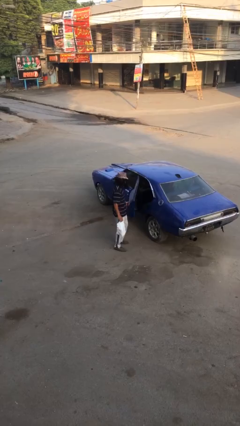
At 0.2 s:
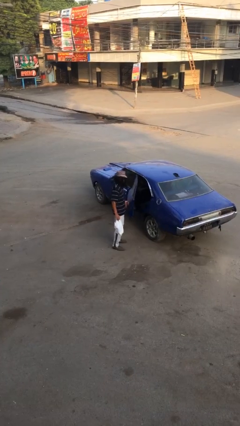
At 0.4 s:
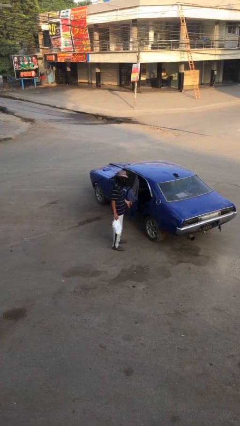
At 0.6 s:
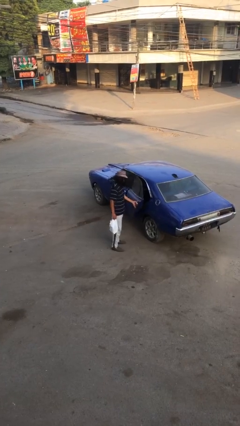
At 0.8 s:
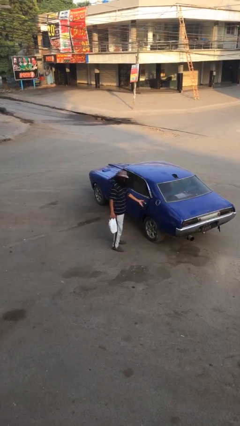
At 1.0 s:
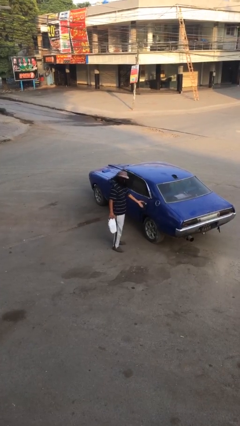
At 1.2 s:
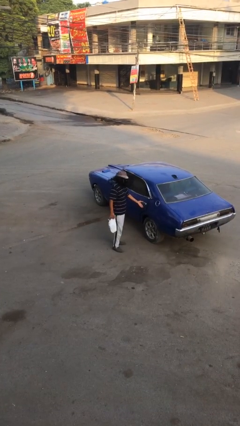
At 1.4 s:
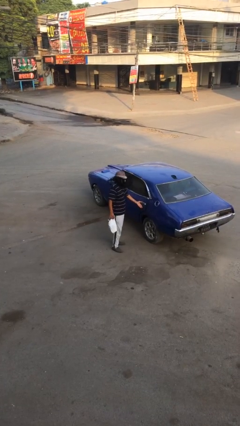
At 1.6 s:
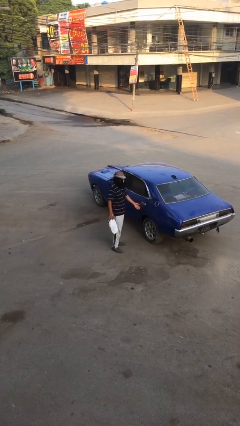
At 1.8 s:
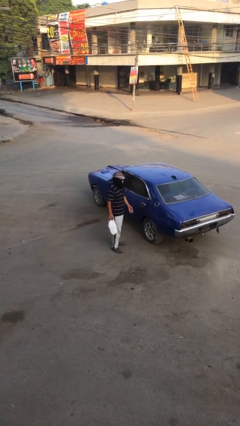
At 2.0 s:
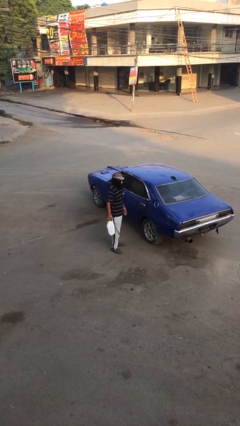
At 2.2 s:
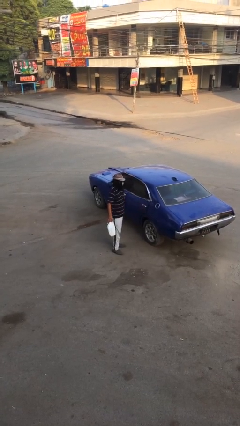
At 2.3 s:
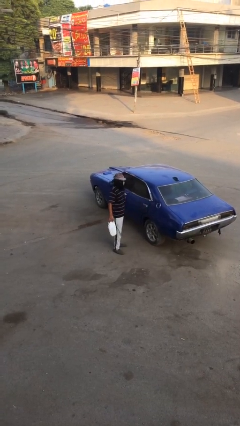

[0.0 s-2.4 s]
person closes car door

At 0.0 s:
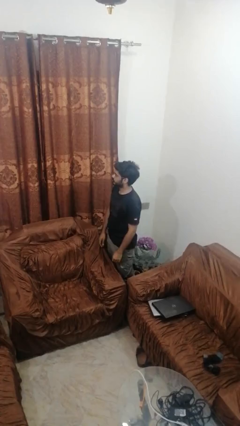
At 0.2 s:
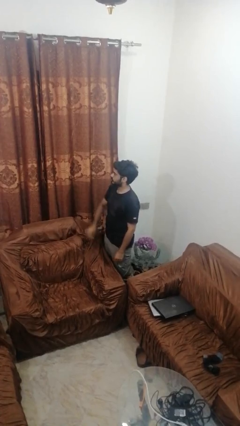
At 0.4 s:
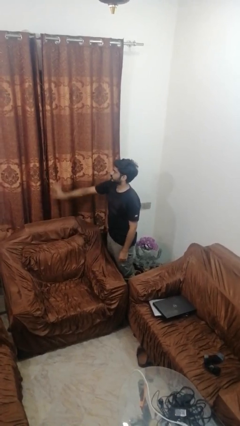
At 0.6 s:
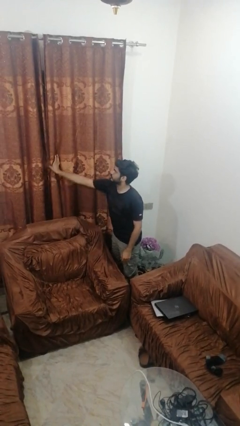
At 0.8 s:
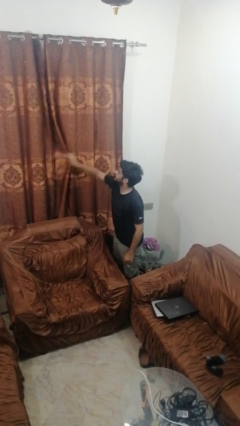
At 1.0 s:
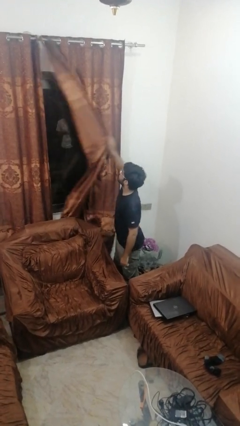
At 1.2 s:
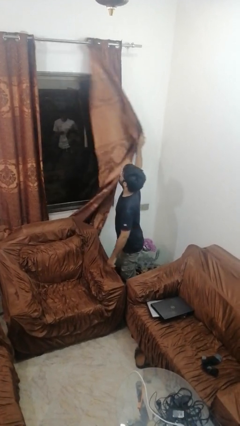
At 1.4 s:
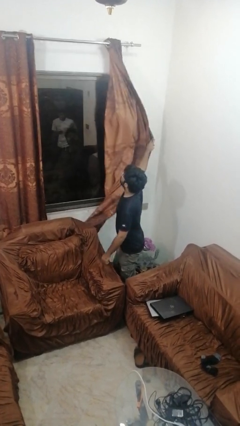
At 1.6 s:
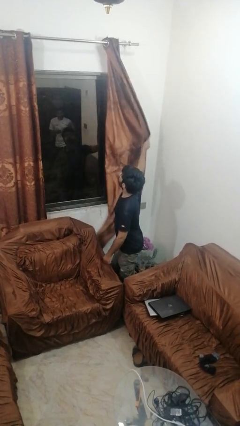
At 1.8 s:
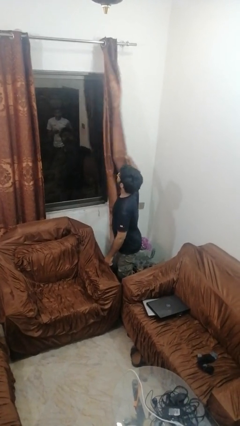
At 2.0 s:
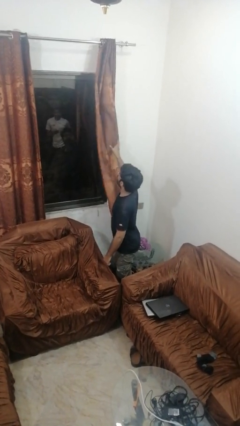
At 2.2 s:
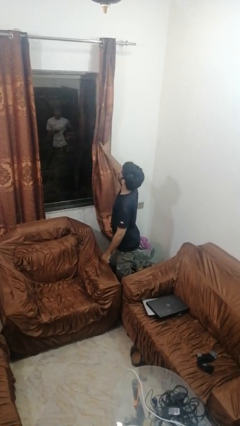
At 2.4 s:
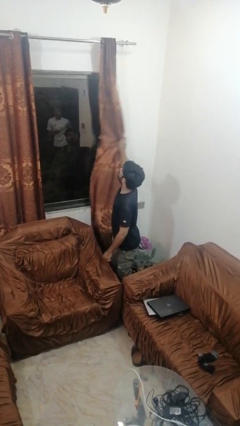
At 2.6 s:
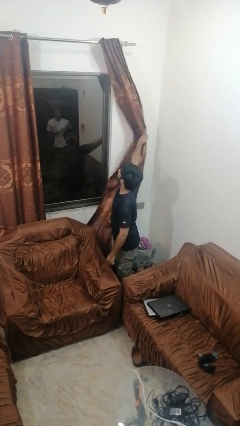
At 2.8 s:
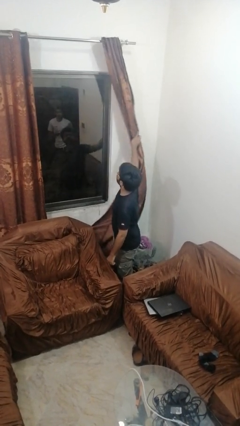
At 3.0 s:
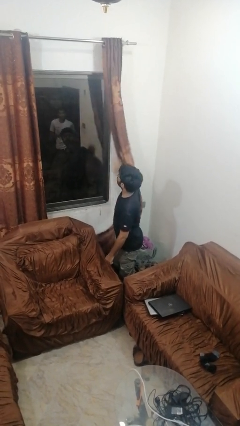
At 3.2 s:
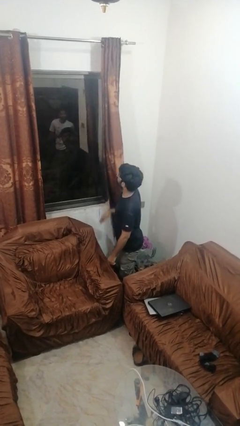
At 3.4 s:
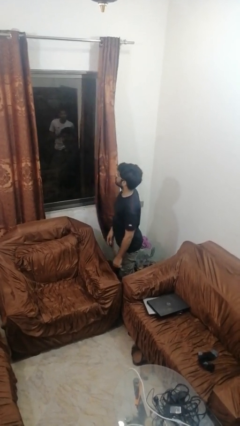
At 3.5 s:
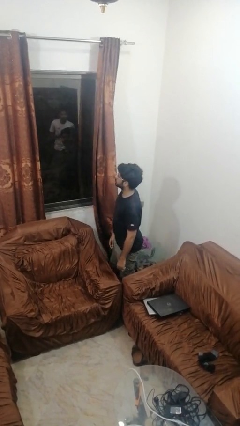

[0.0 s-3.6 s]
person opens curtains

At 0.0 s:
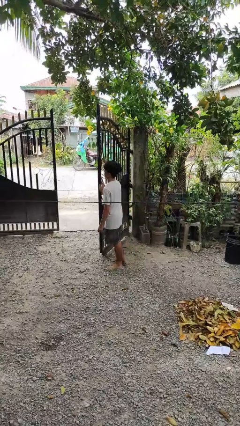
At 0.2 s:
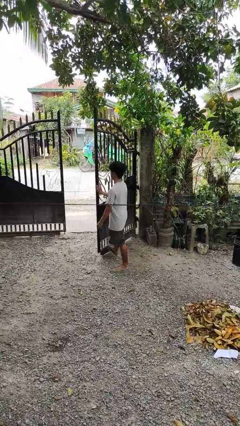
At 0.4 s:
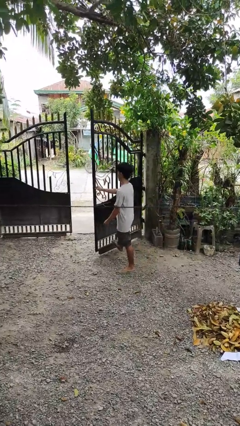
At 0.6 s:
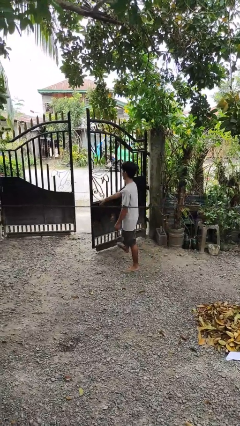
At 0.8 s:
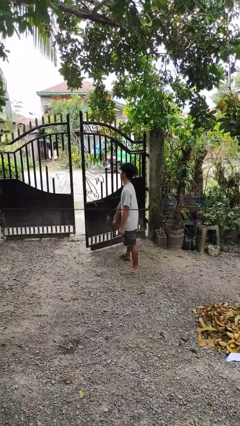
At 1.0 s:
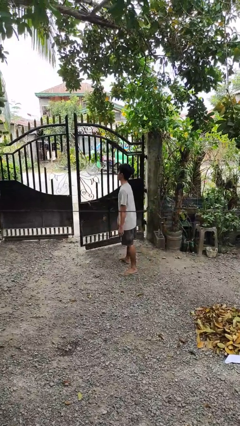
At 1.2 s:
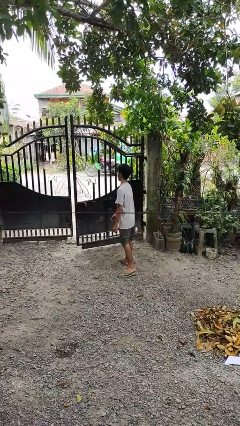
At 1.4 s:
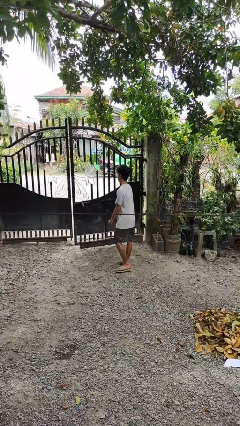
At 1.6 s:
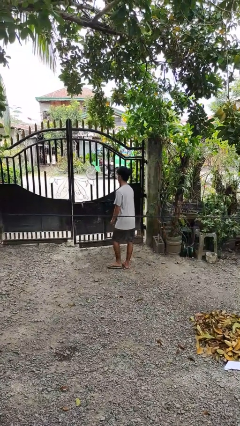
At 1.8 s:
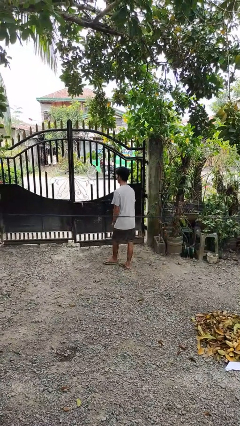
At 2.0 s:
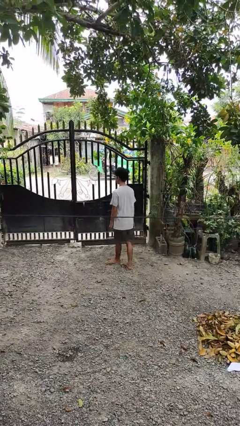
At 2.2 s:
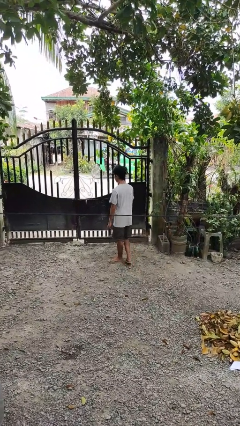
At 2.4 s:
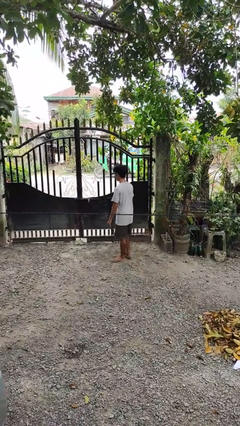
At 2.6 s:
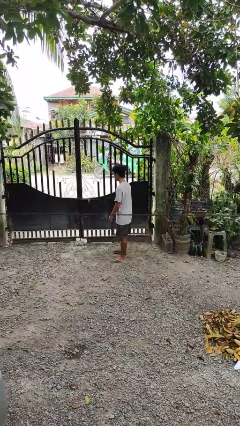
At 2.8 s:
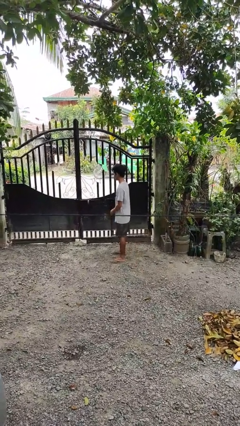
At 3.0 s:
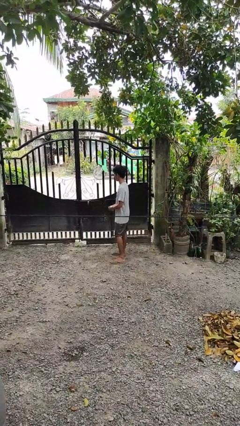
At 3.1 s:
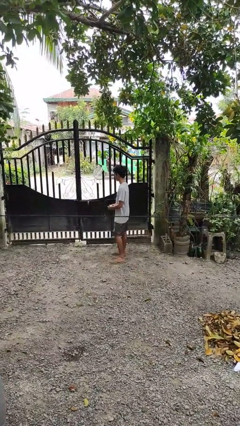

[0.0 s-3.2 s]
person closes gate

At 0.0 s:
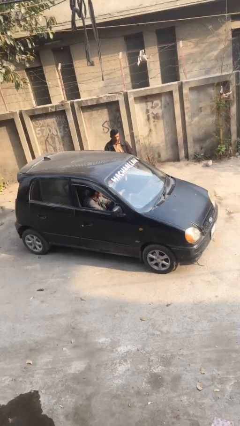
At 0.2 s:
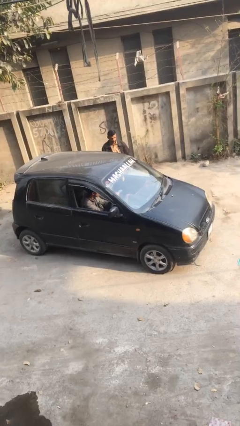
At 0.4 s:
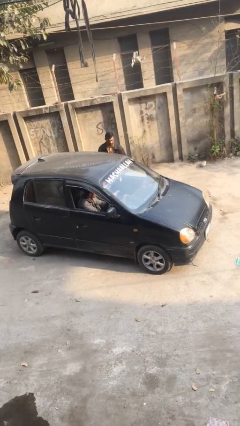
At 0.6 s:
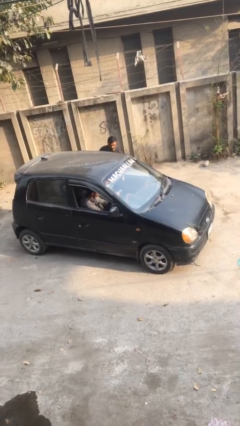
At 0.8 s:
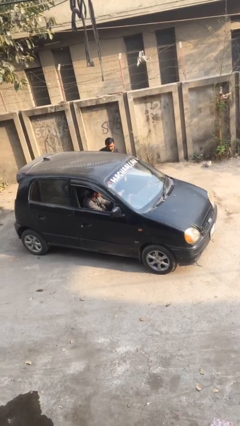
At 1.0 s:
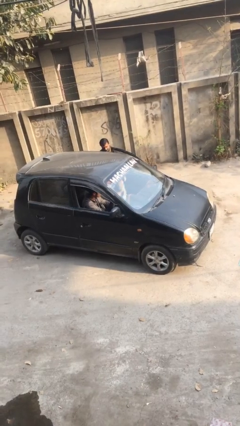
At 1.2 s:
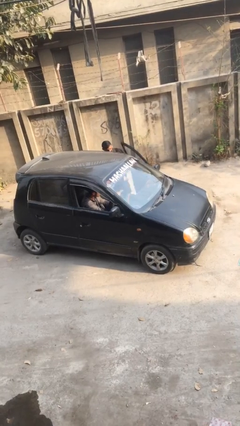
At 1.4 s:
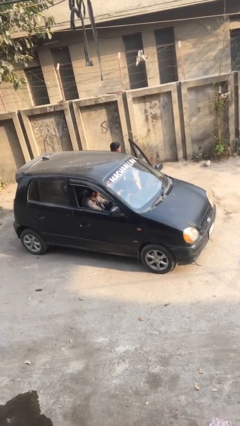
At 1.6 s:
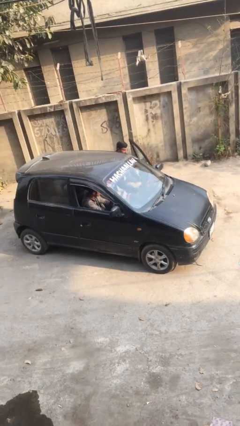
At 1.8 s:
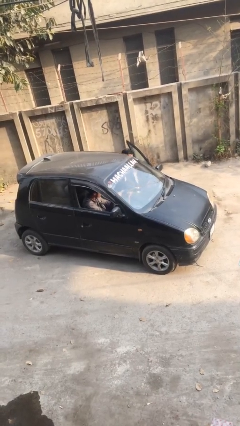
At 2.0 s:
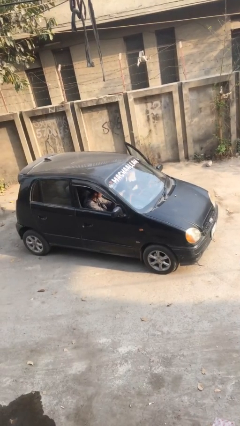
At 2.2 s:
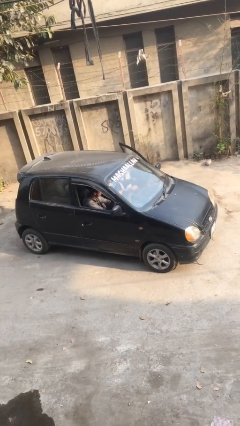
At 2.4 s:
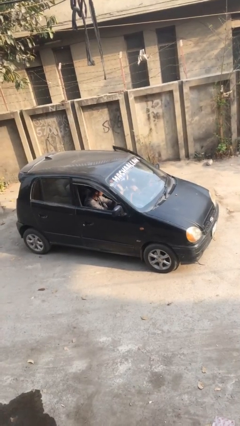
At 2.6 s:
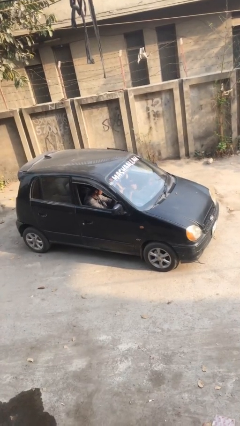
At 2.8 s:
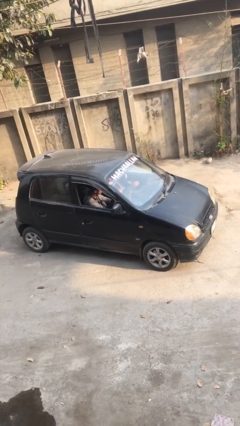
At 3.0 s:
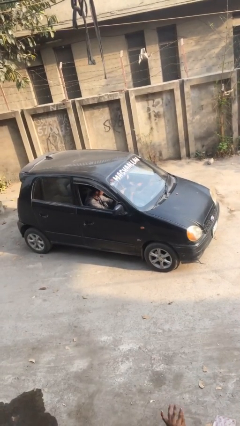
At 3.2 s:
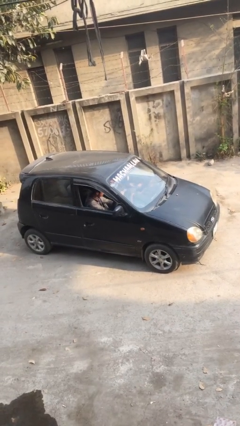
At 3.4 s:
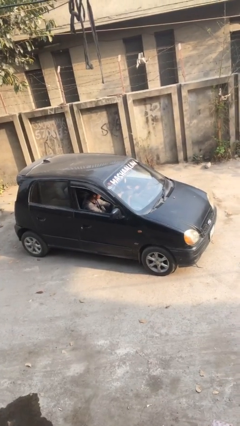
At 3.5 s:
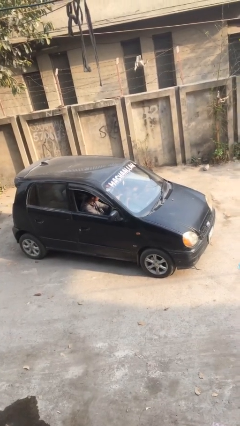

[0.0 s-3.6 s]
car picks up person

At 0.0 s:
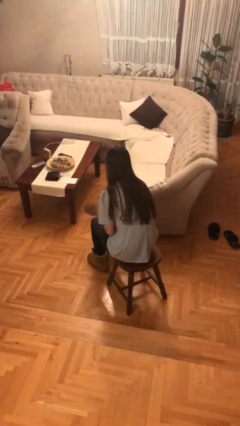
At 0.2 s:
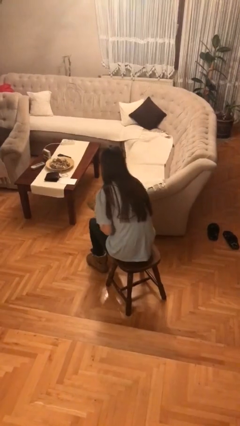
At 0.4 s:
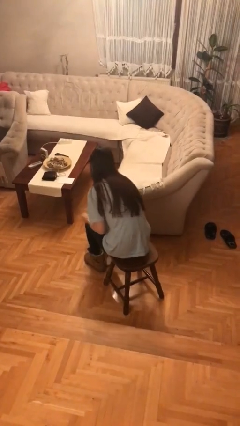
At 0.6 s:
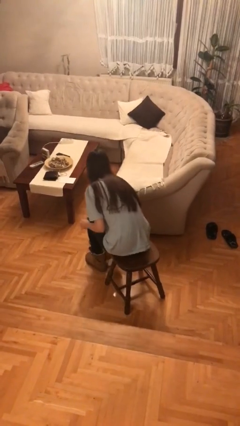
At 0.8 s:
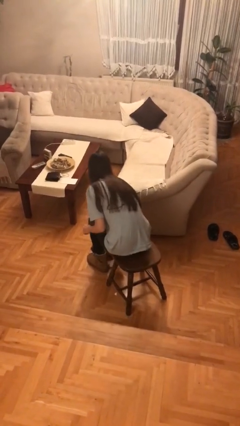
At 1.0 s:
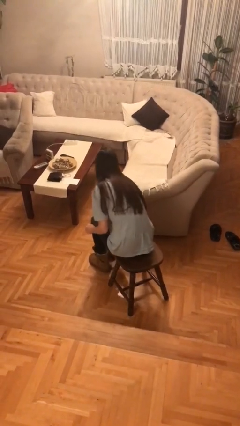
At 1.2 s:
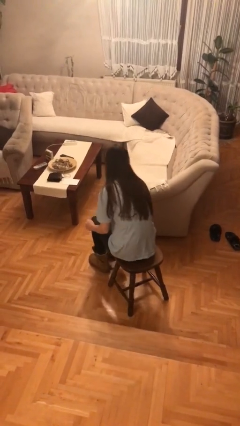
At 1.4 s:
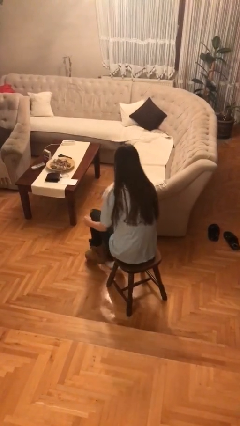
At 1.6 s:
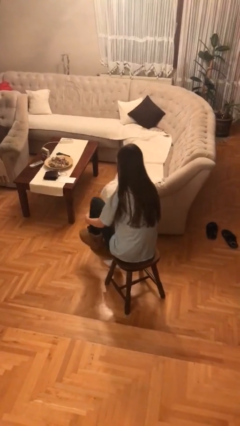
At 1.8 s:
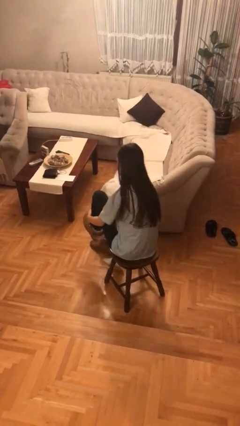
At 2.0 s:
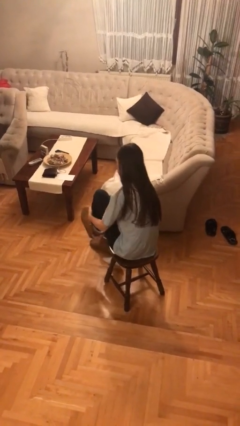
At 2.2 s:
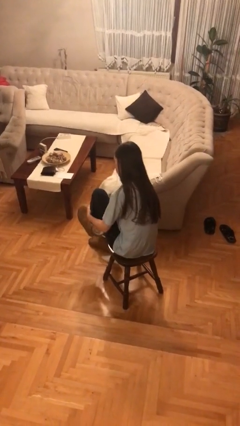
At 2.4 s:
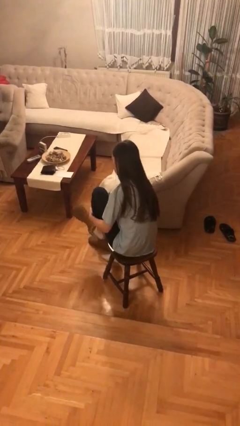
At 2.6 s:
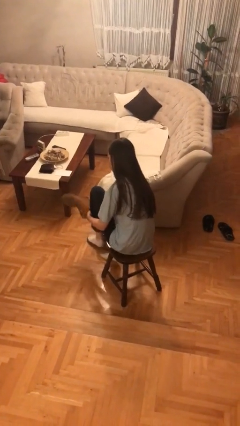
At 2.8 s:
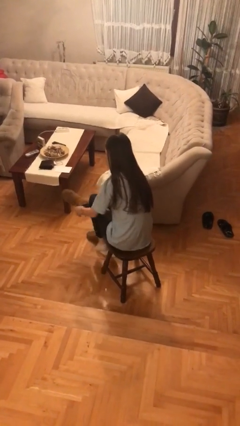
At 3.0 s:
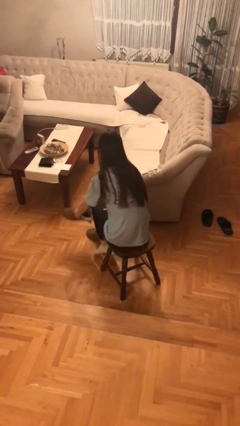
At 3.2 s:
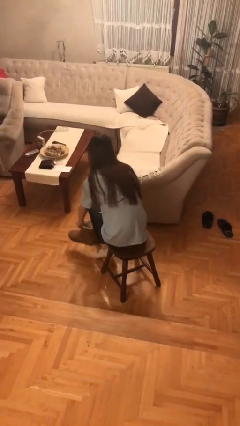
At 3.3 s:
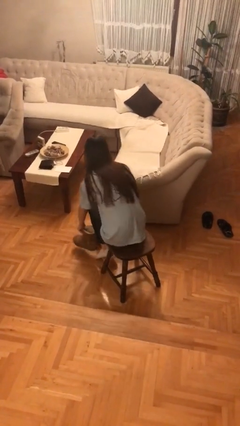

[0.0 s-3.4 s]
person takes off shoes

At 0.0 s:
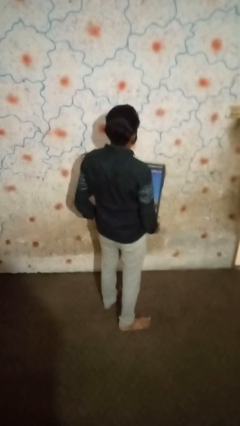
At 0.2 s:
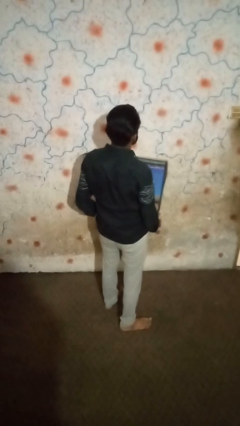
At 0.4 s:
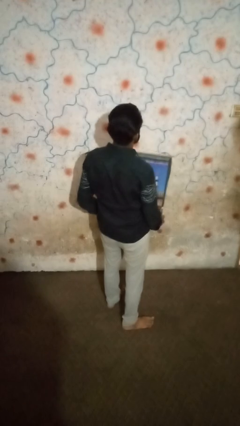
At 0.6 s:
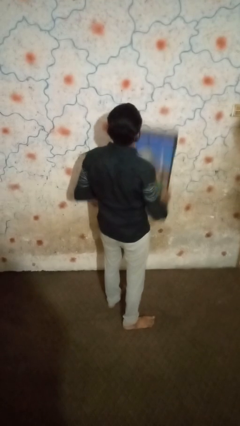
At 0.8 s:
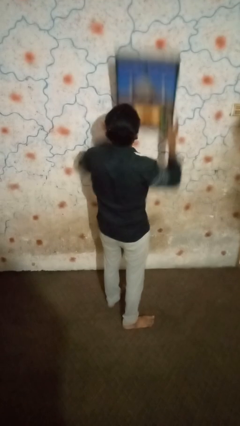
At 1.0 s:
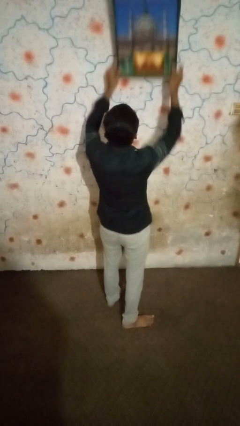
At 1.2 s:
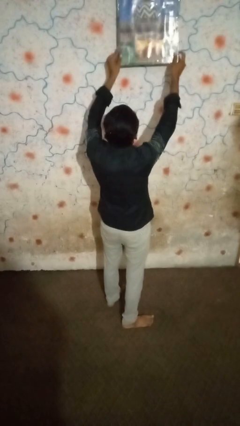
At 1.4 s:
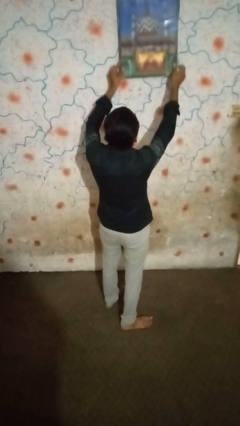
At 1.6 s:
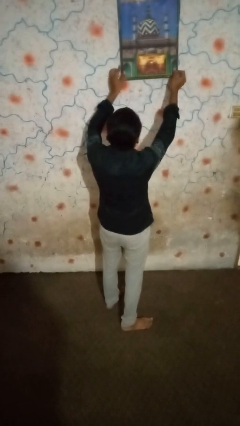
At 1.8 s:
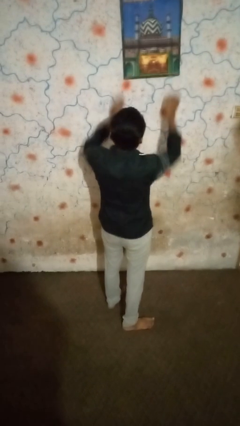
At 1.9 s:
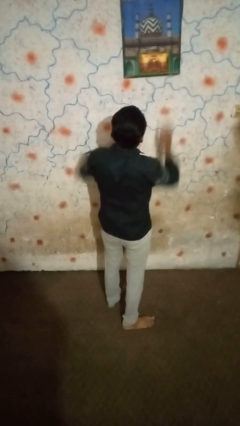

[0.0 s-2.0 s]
person puts up picture frame
